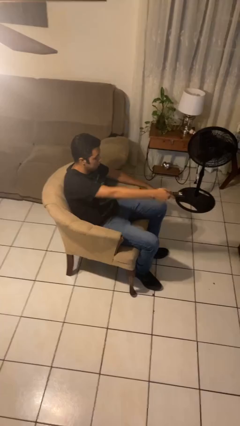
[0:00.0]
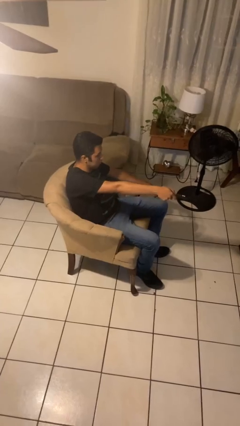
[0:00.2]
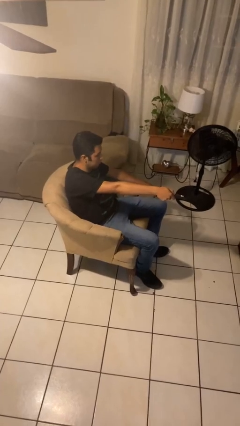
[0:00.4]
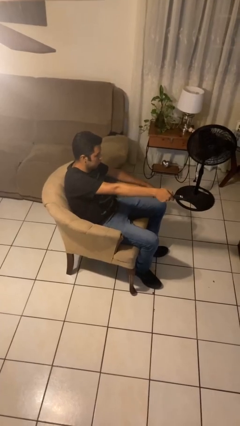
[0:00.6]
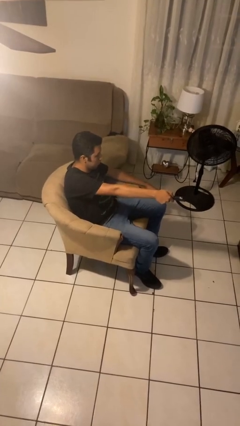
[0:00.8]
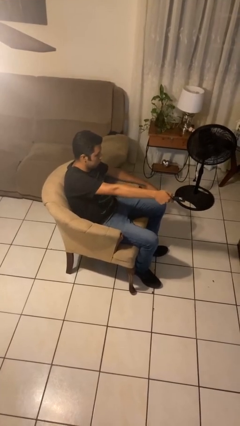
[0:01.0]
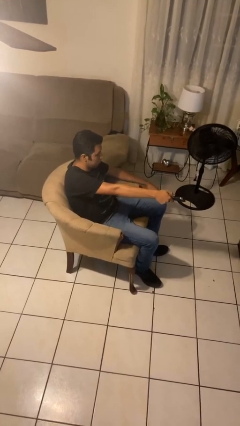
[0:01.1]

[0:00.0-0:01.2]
person uses television remote

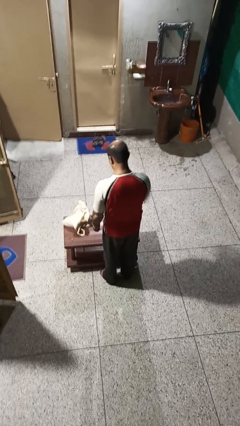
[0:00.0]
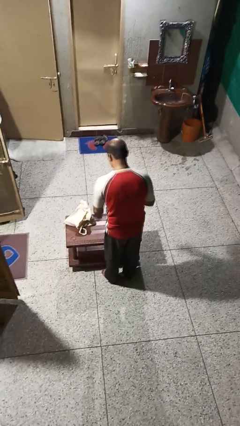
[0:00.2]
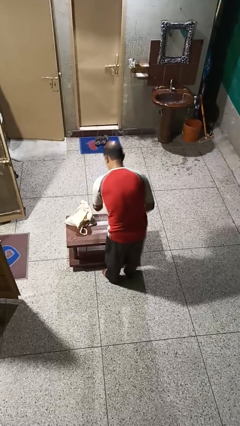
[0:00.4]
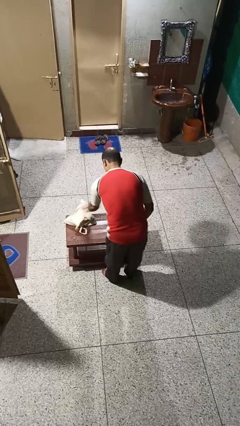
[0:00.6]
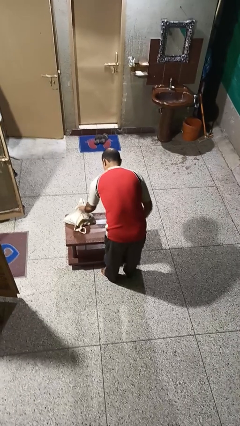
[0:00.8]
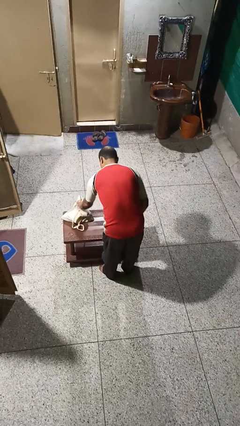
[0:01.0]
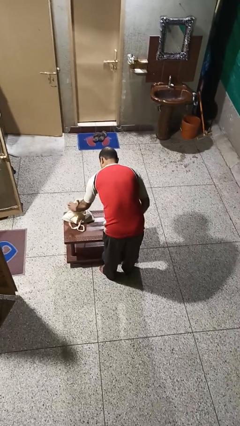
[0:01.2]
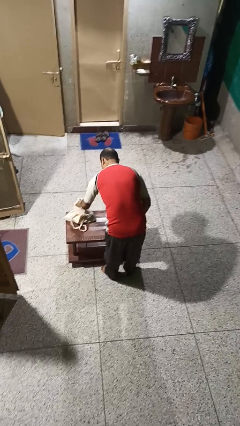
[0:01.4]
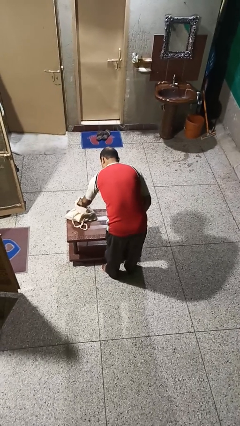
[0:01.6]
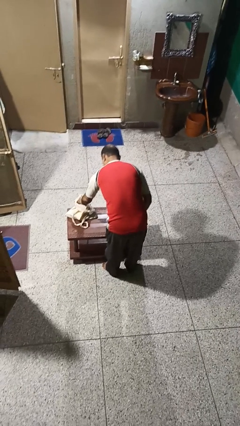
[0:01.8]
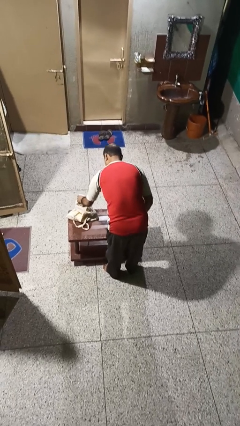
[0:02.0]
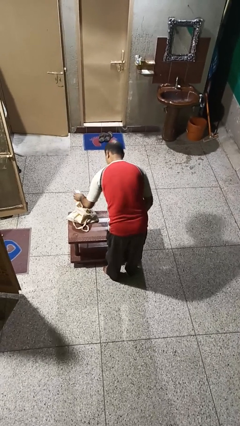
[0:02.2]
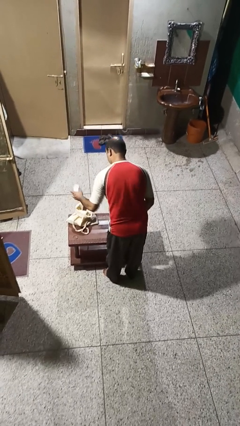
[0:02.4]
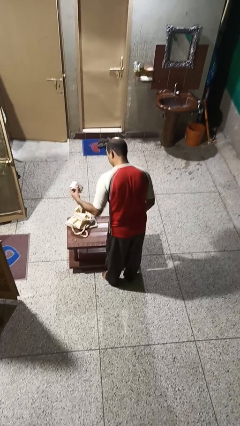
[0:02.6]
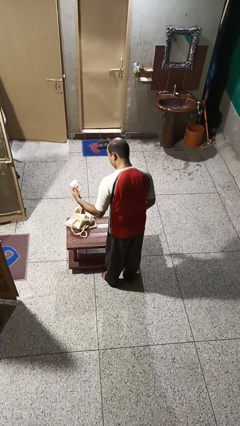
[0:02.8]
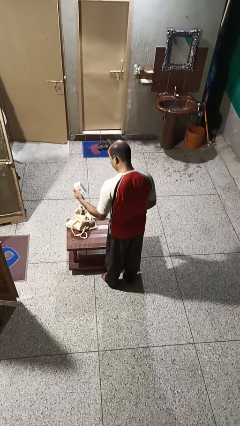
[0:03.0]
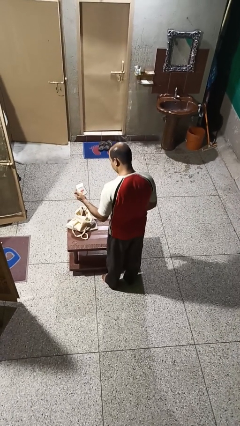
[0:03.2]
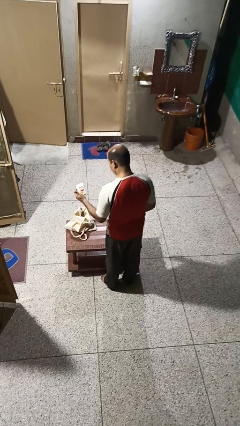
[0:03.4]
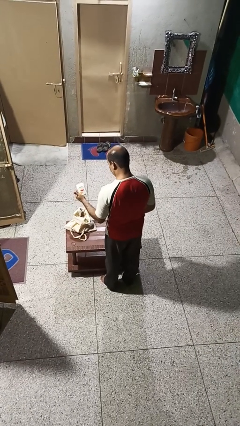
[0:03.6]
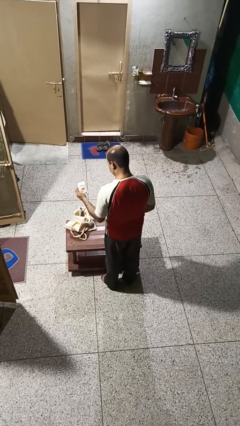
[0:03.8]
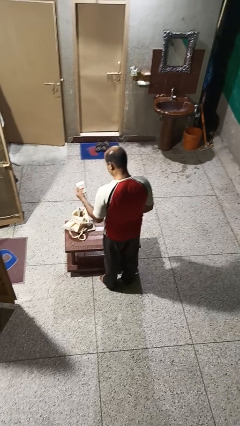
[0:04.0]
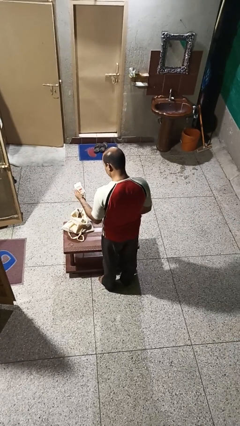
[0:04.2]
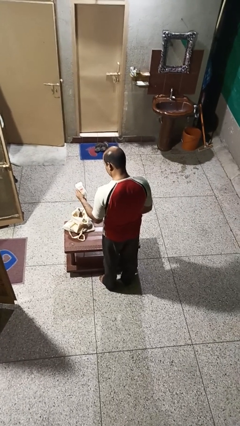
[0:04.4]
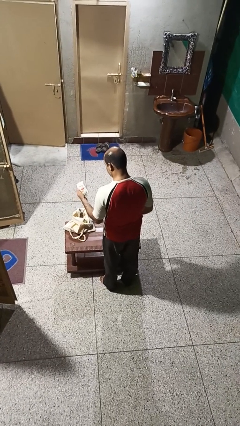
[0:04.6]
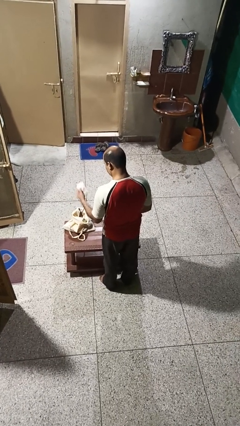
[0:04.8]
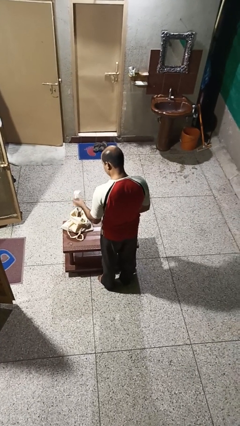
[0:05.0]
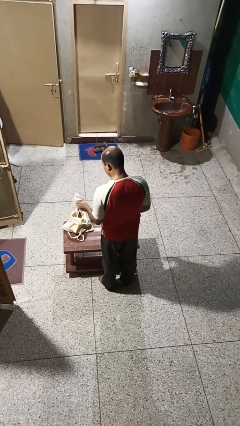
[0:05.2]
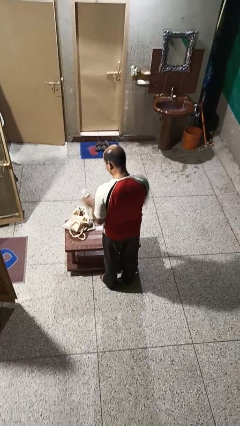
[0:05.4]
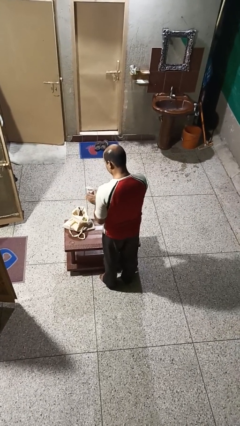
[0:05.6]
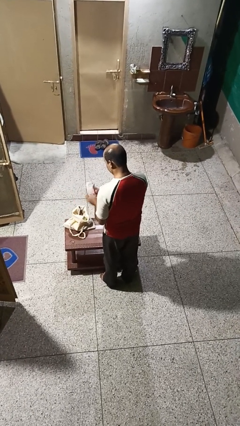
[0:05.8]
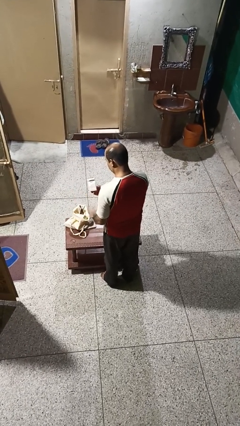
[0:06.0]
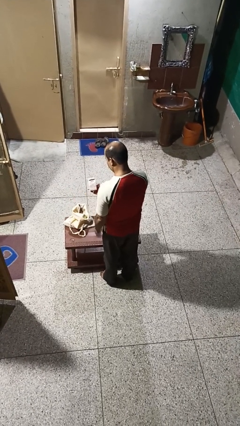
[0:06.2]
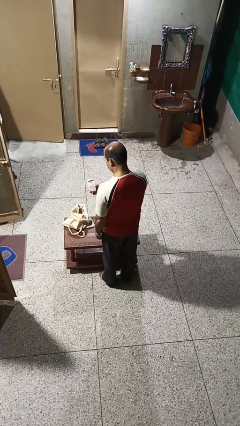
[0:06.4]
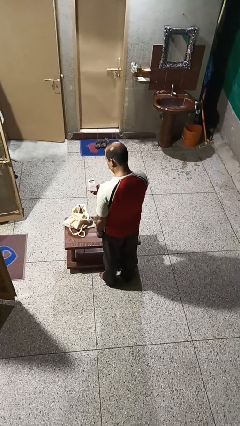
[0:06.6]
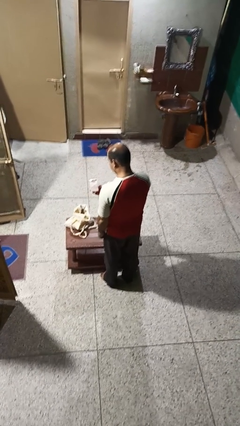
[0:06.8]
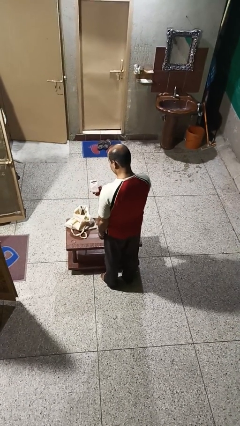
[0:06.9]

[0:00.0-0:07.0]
person takes object from bag

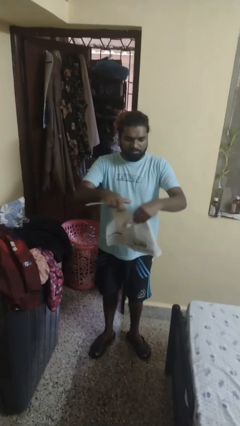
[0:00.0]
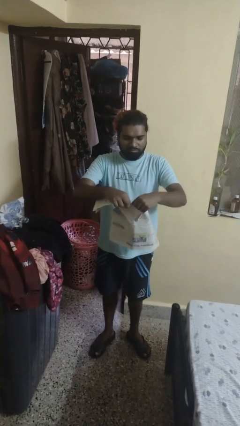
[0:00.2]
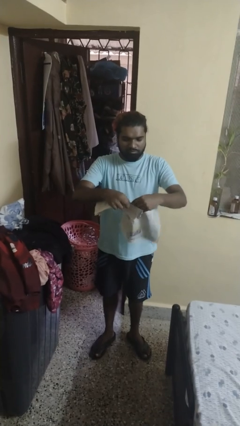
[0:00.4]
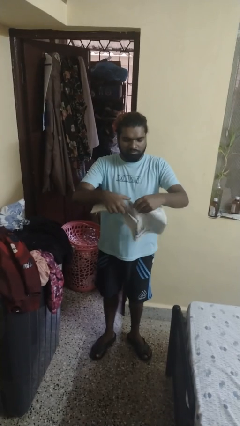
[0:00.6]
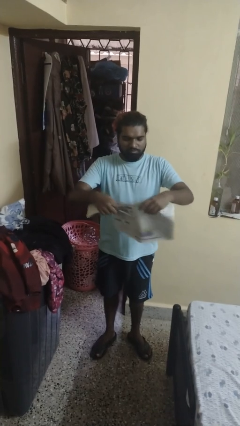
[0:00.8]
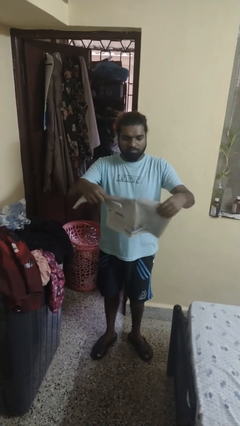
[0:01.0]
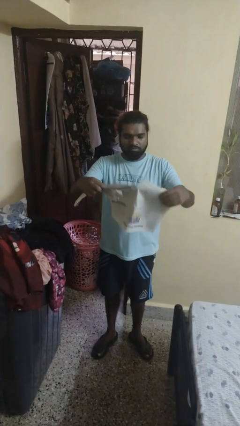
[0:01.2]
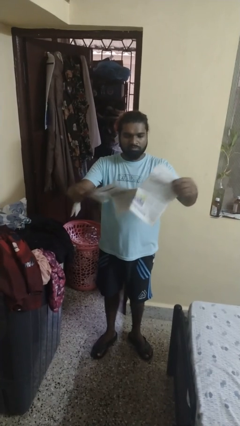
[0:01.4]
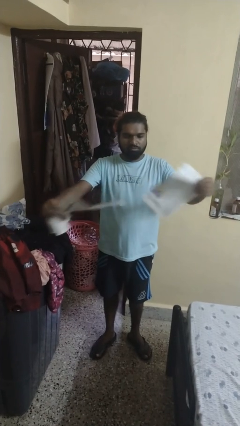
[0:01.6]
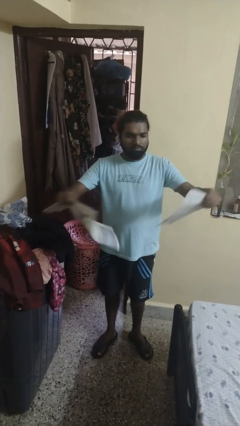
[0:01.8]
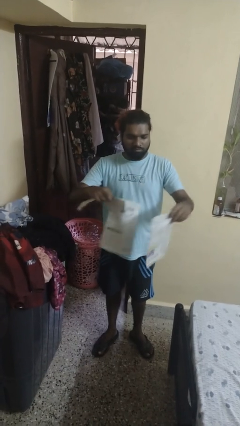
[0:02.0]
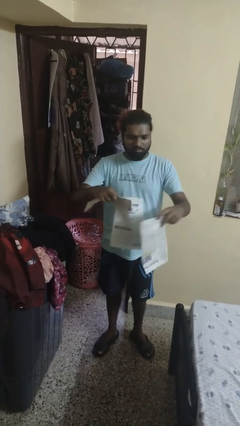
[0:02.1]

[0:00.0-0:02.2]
person tears paper

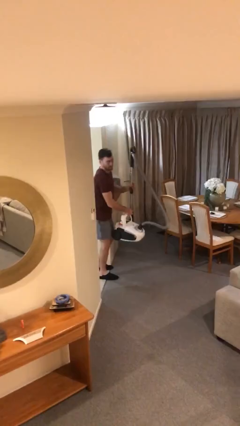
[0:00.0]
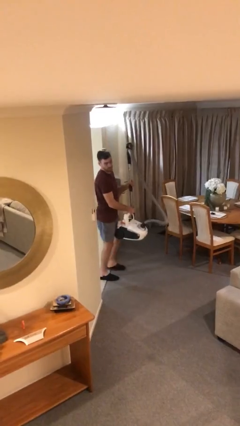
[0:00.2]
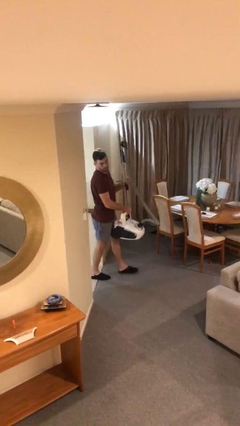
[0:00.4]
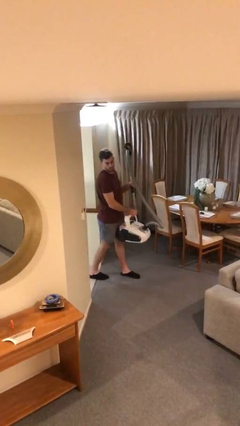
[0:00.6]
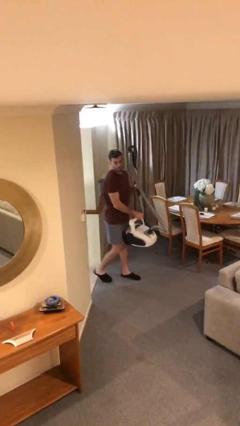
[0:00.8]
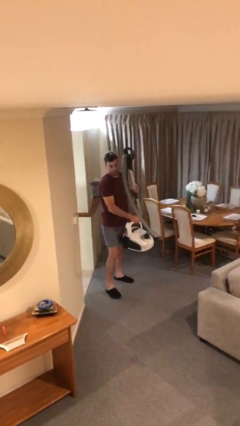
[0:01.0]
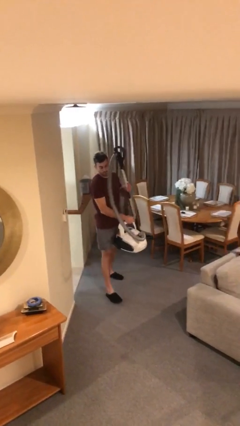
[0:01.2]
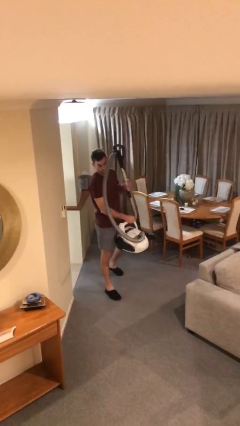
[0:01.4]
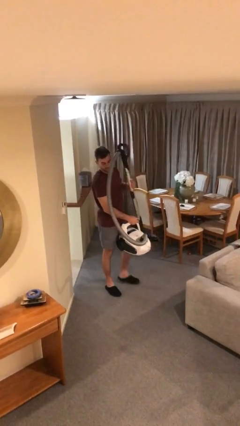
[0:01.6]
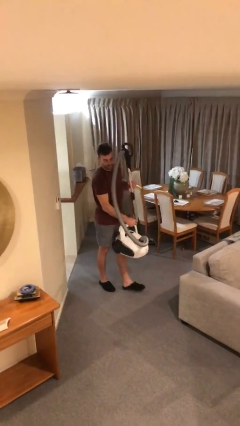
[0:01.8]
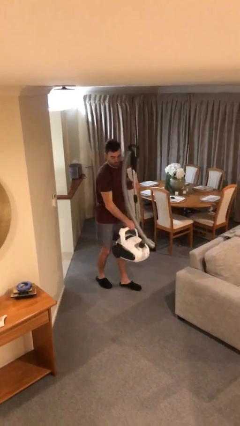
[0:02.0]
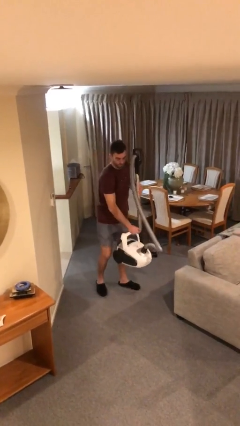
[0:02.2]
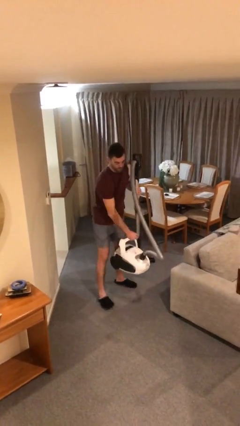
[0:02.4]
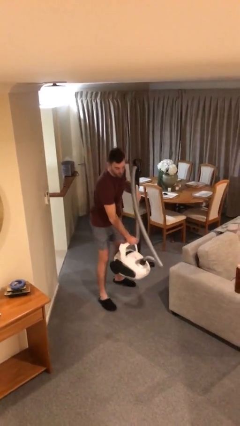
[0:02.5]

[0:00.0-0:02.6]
person carries heavy object

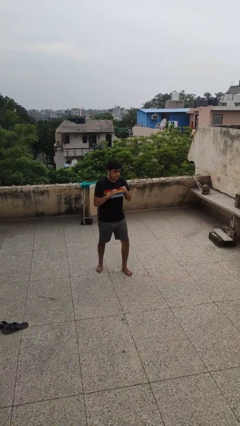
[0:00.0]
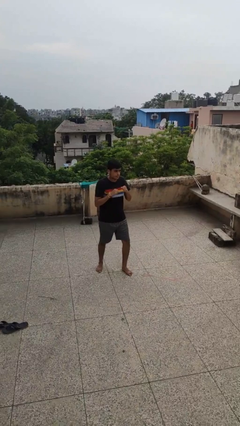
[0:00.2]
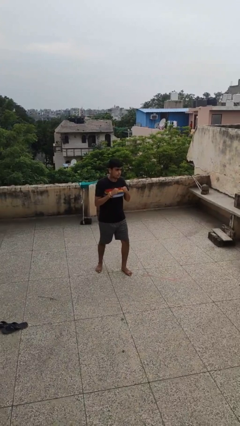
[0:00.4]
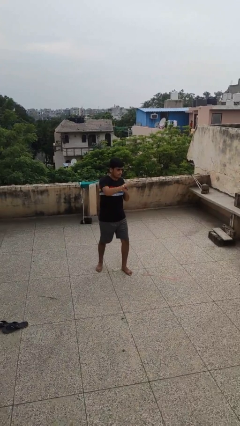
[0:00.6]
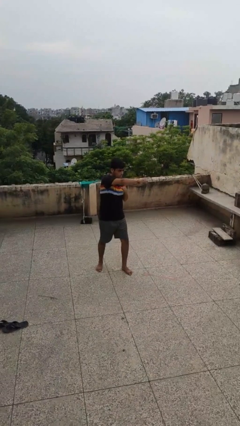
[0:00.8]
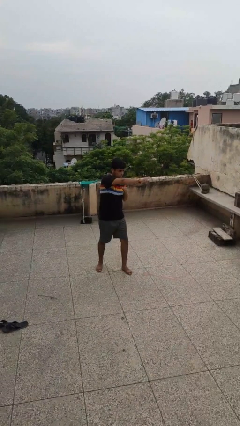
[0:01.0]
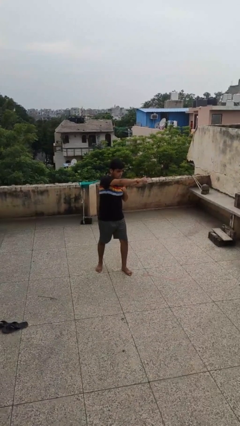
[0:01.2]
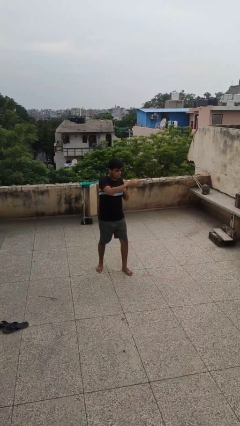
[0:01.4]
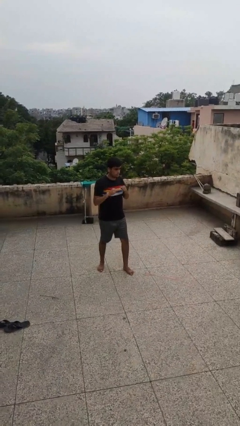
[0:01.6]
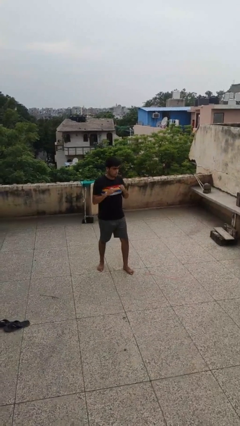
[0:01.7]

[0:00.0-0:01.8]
person punches

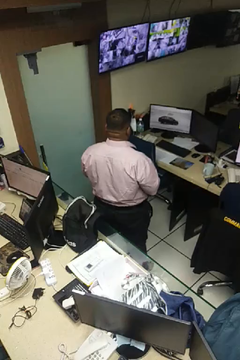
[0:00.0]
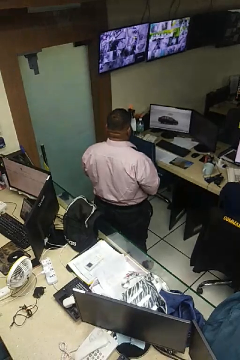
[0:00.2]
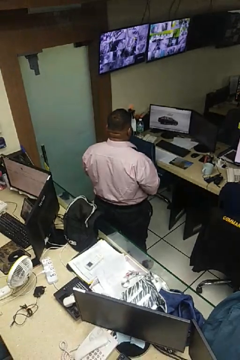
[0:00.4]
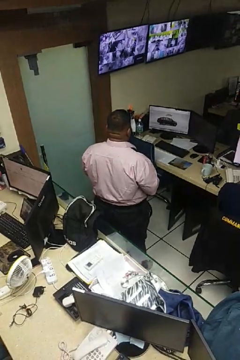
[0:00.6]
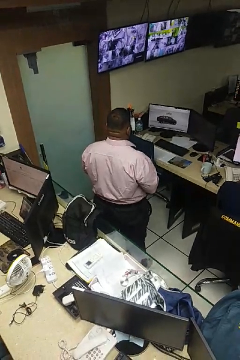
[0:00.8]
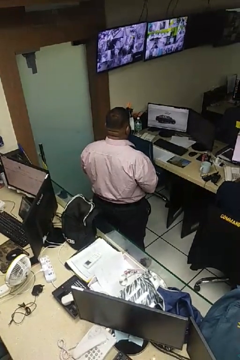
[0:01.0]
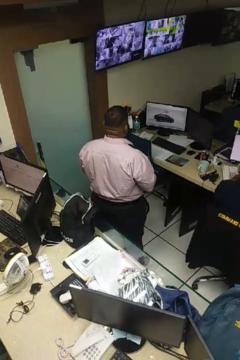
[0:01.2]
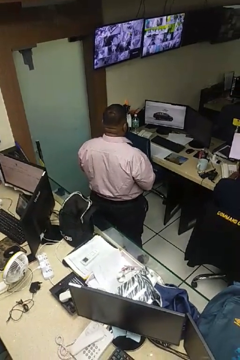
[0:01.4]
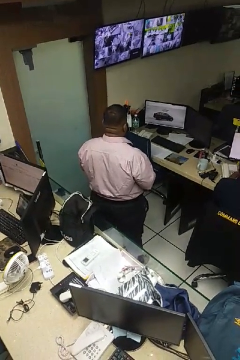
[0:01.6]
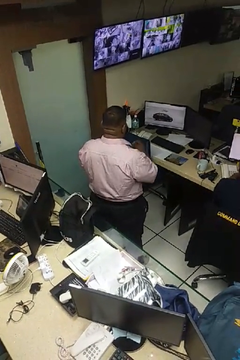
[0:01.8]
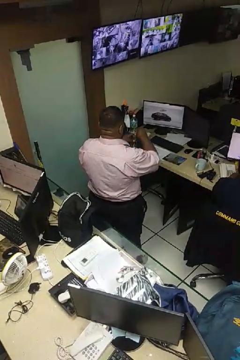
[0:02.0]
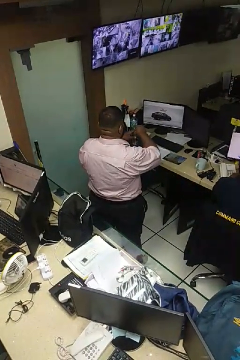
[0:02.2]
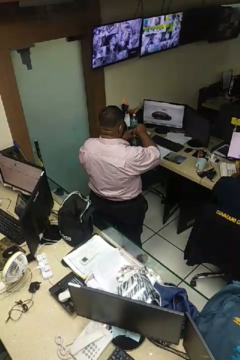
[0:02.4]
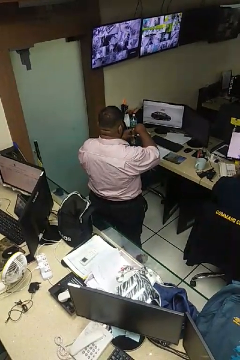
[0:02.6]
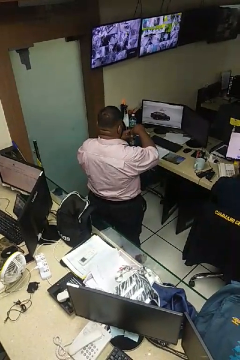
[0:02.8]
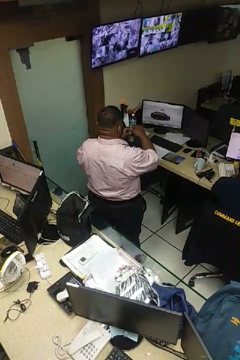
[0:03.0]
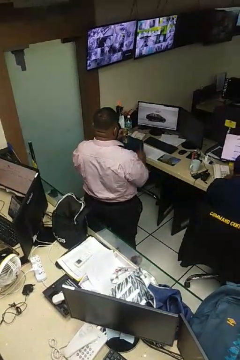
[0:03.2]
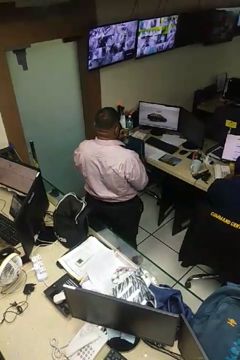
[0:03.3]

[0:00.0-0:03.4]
person opens beverage can
